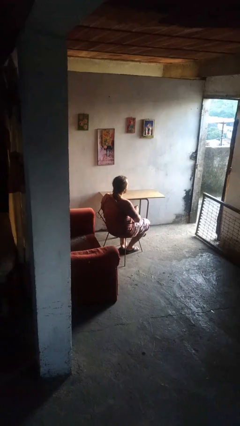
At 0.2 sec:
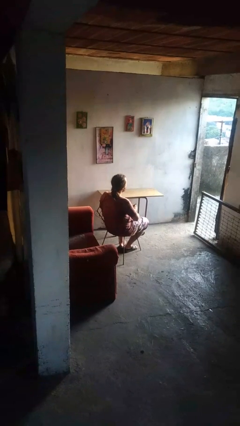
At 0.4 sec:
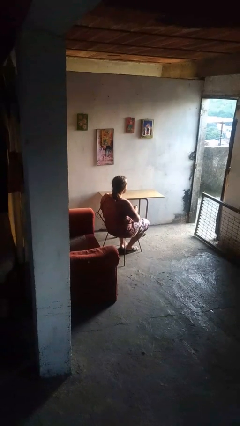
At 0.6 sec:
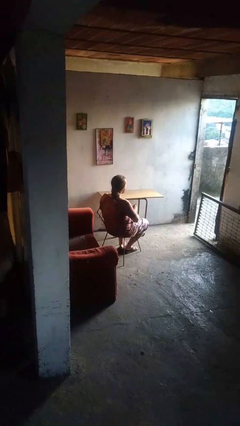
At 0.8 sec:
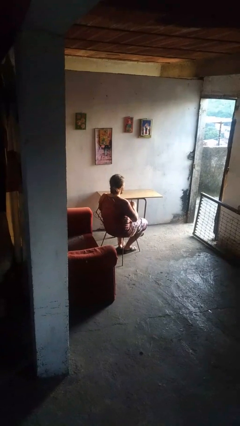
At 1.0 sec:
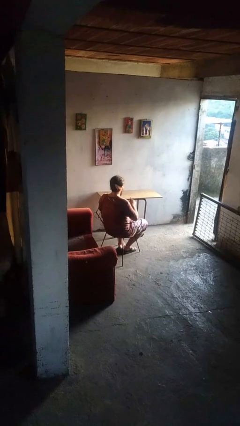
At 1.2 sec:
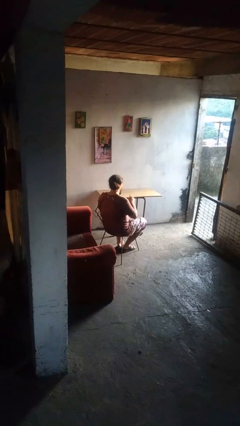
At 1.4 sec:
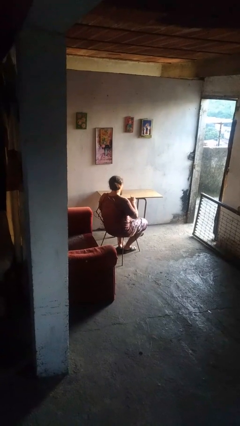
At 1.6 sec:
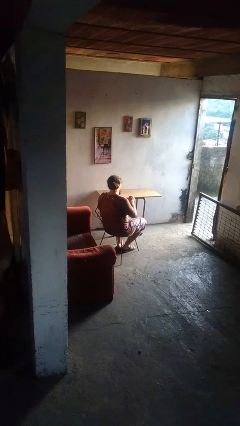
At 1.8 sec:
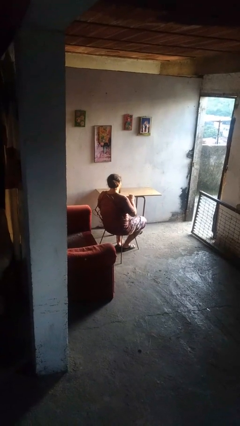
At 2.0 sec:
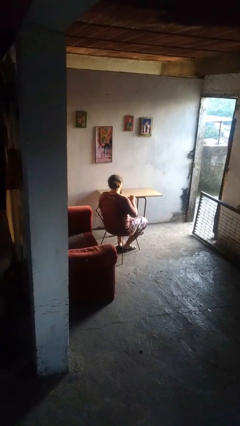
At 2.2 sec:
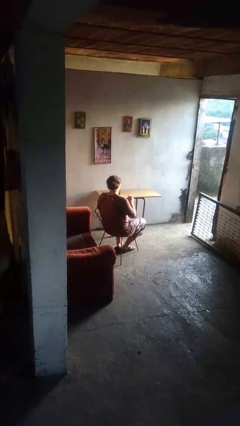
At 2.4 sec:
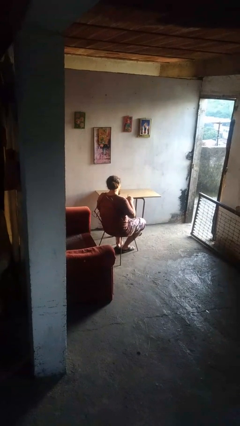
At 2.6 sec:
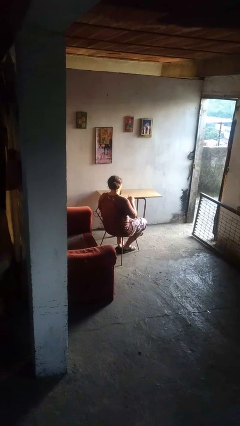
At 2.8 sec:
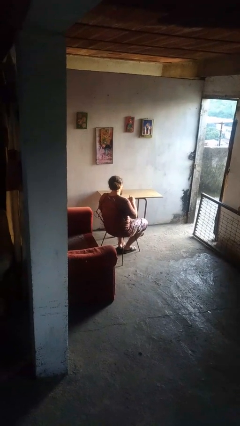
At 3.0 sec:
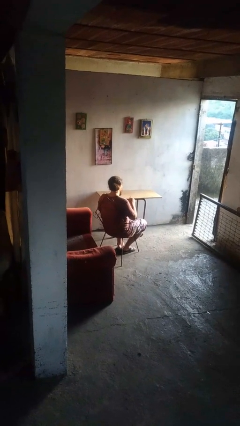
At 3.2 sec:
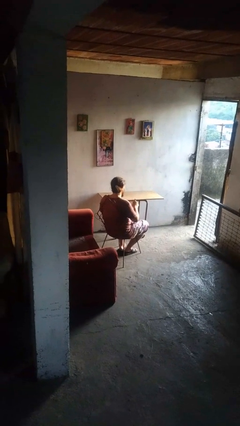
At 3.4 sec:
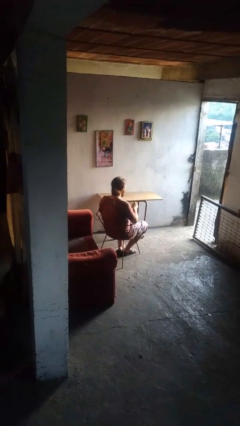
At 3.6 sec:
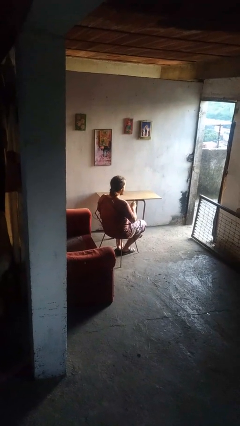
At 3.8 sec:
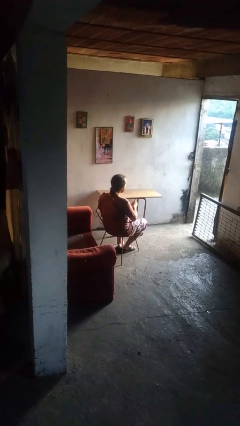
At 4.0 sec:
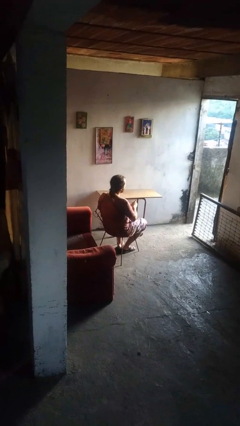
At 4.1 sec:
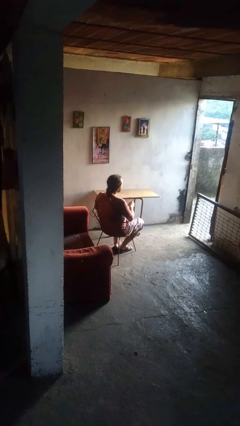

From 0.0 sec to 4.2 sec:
person stirs mug

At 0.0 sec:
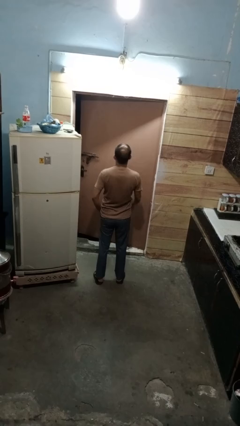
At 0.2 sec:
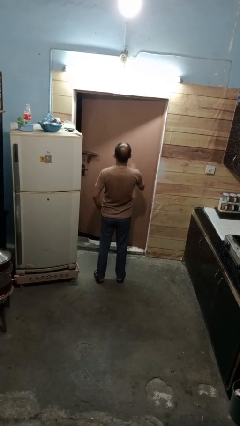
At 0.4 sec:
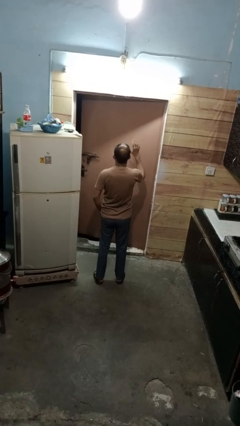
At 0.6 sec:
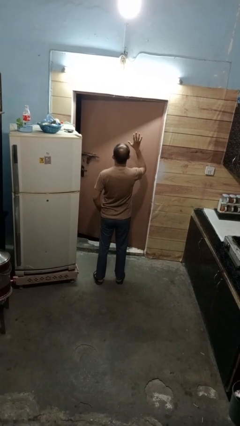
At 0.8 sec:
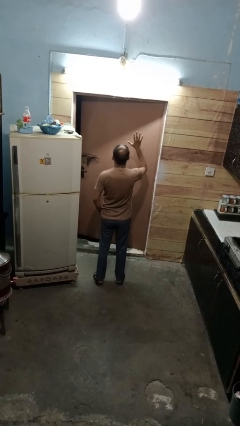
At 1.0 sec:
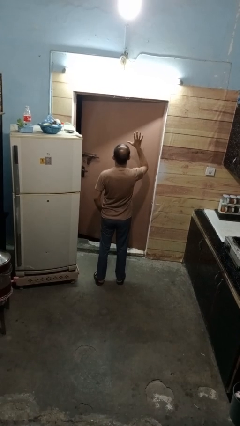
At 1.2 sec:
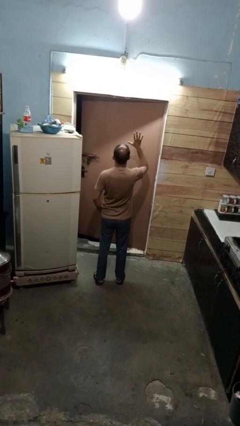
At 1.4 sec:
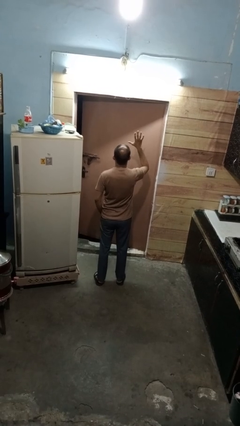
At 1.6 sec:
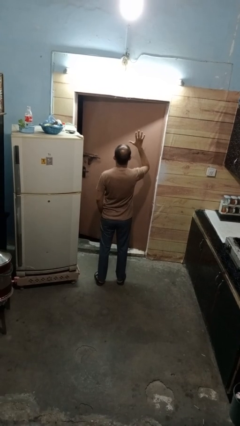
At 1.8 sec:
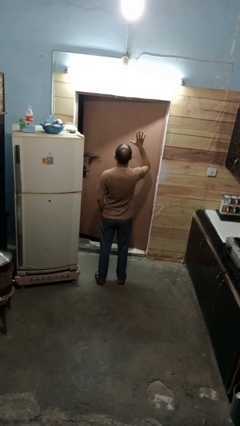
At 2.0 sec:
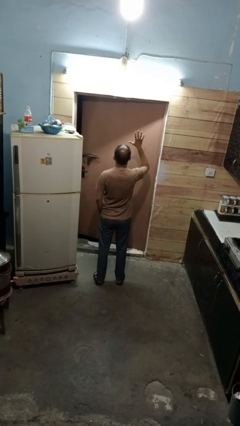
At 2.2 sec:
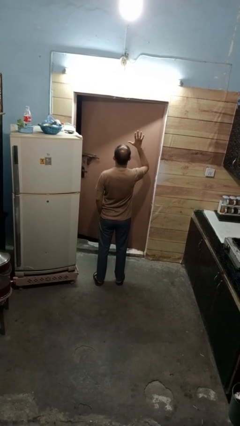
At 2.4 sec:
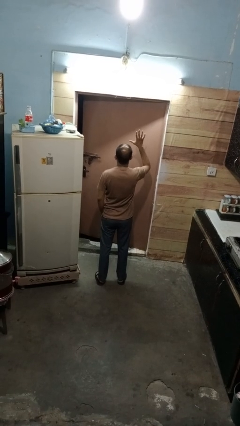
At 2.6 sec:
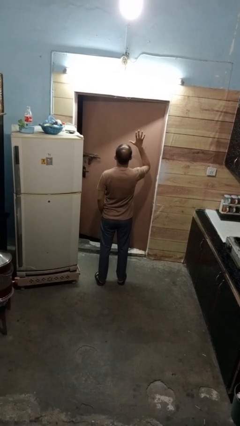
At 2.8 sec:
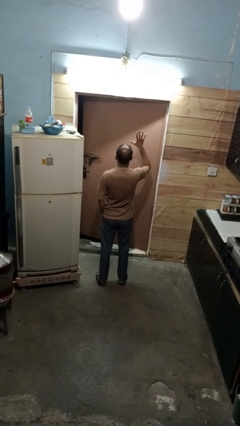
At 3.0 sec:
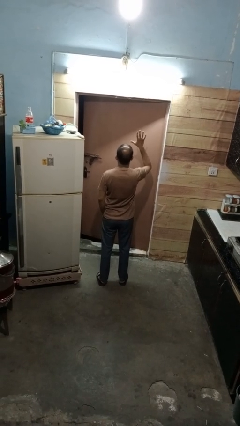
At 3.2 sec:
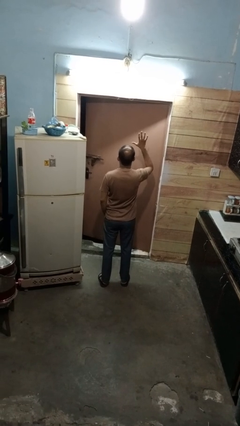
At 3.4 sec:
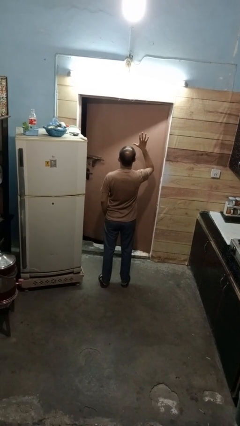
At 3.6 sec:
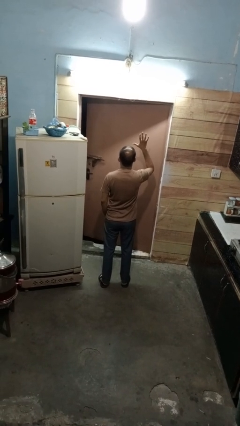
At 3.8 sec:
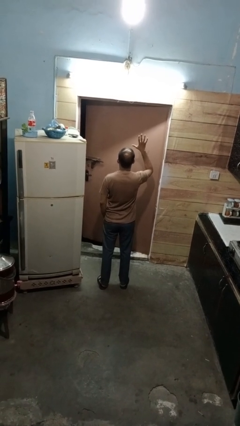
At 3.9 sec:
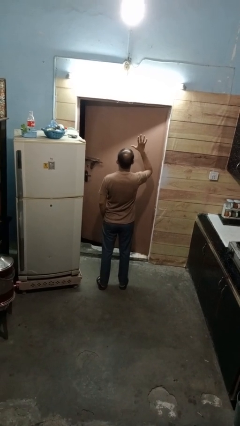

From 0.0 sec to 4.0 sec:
person gestures number five

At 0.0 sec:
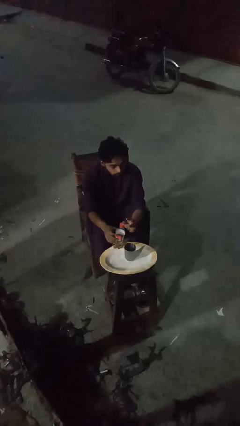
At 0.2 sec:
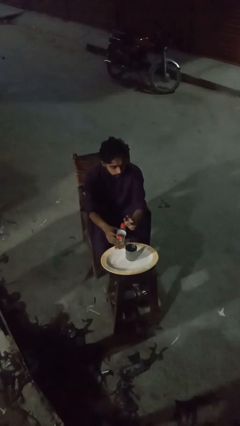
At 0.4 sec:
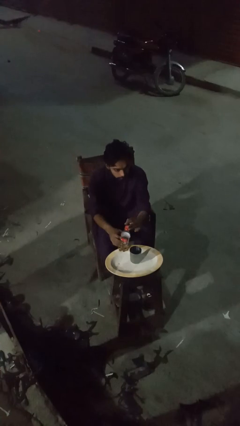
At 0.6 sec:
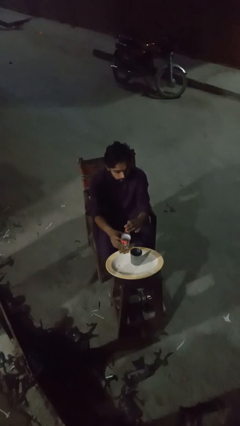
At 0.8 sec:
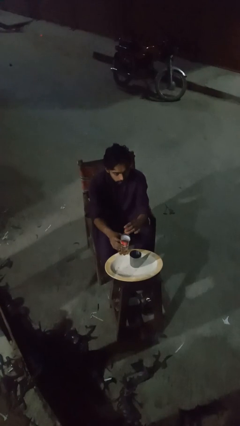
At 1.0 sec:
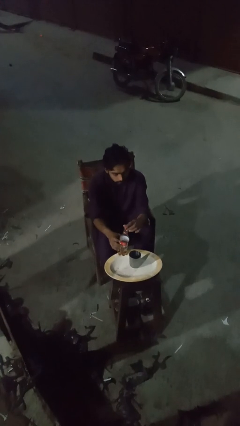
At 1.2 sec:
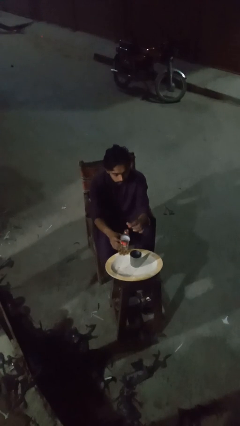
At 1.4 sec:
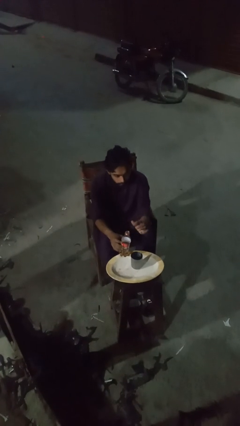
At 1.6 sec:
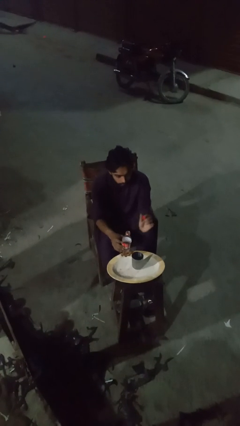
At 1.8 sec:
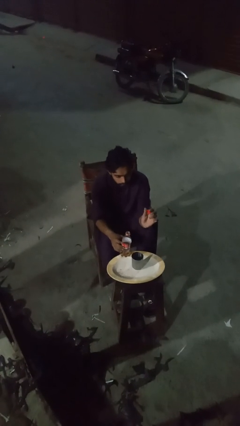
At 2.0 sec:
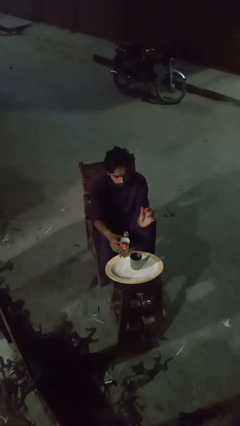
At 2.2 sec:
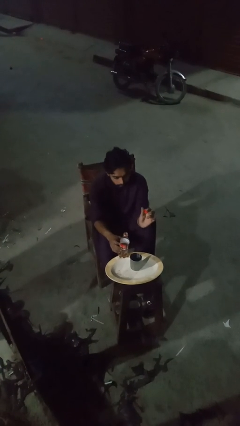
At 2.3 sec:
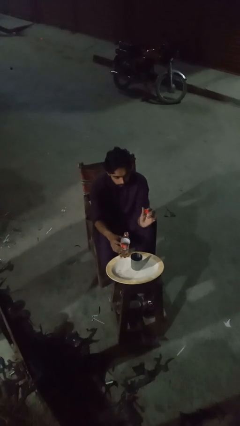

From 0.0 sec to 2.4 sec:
person unscrews lid from bottle

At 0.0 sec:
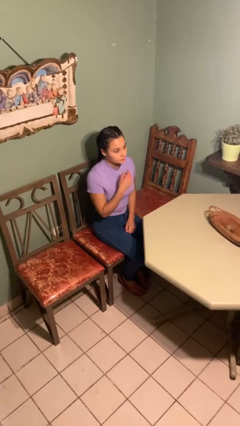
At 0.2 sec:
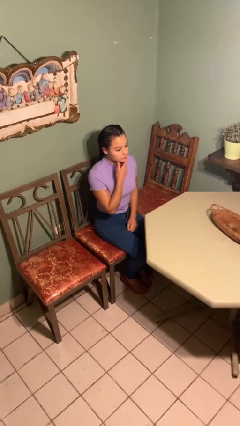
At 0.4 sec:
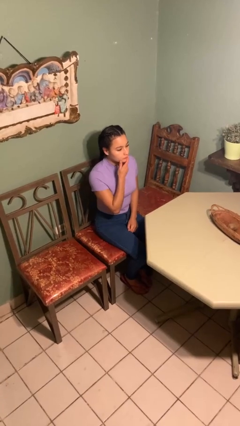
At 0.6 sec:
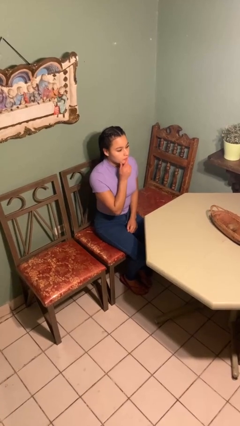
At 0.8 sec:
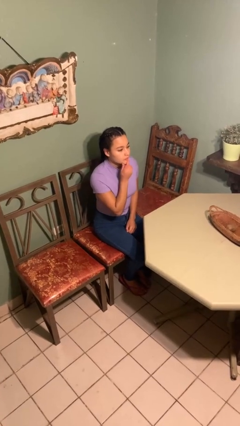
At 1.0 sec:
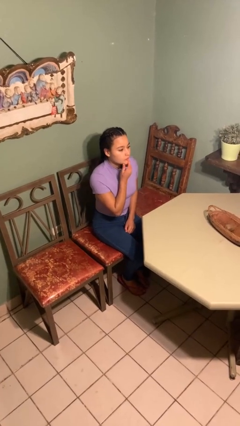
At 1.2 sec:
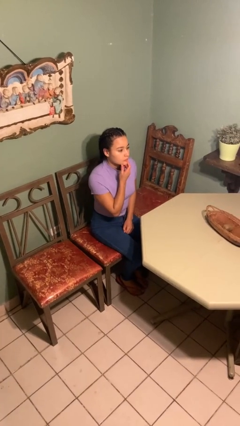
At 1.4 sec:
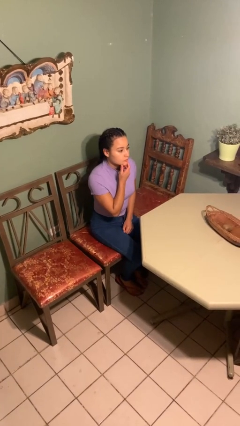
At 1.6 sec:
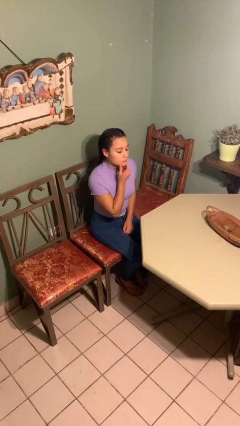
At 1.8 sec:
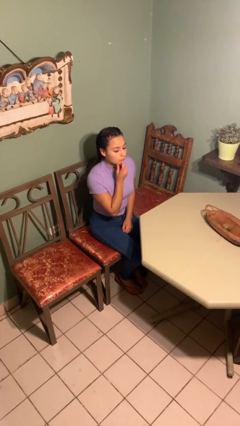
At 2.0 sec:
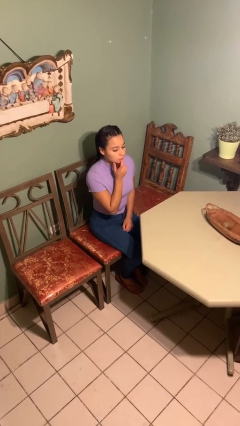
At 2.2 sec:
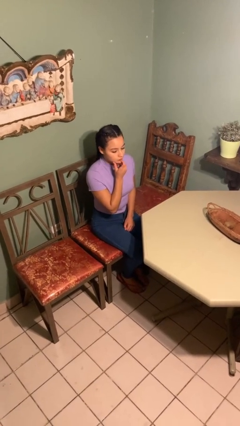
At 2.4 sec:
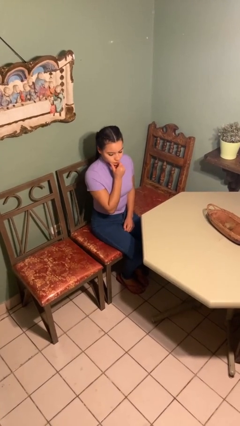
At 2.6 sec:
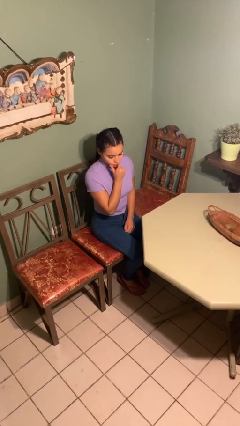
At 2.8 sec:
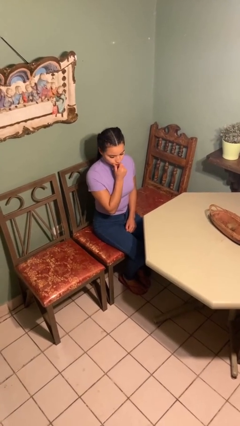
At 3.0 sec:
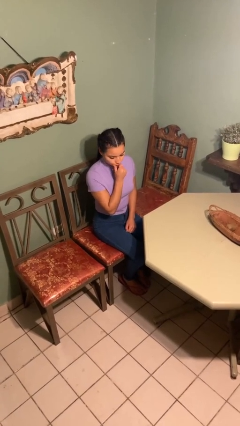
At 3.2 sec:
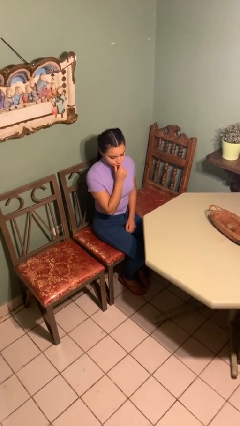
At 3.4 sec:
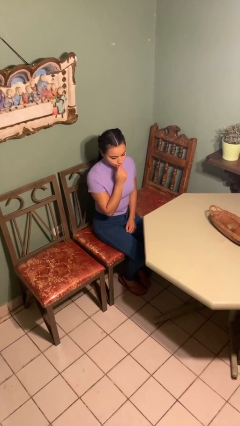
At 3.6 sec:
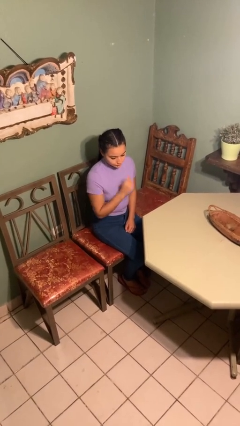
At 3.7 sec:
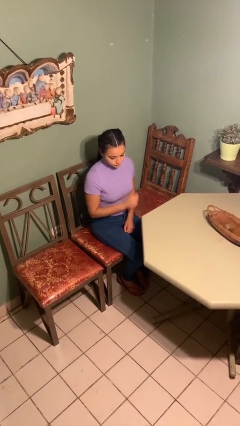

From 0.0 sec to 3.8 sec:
person strokes chin

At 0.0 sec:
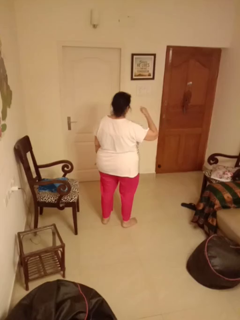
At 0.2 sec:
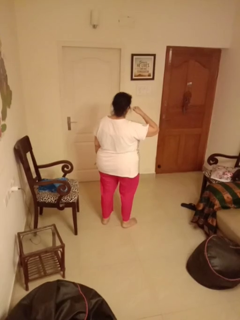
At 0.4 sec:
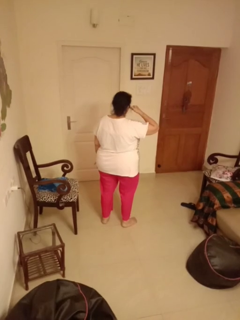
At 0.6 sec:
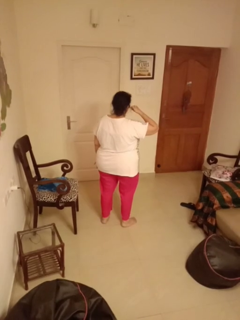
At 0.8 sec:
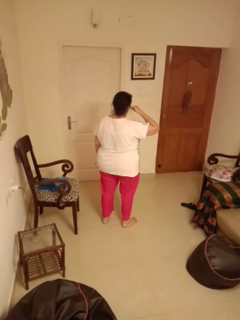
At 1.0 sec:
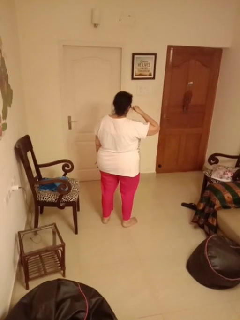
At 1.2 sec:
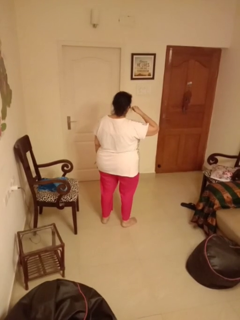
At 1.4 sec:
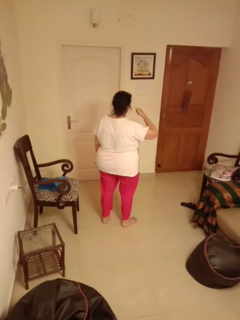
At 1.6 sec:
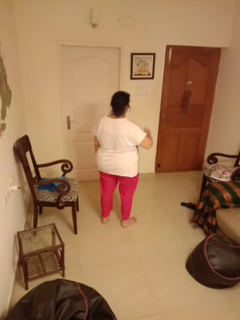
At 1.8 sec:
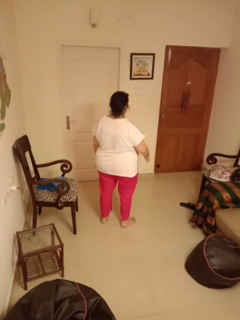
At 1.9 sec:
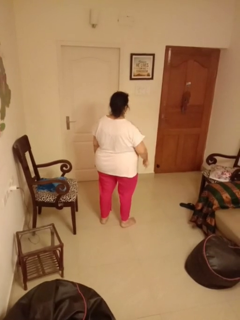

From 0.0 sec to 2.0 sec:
person gestures call me

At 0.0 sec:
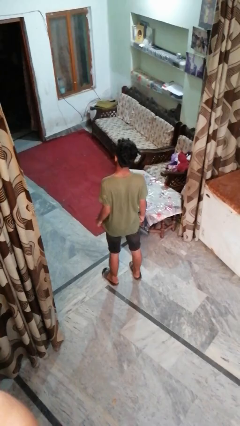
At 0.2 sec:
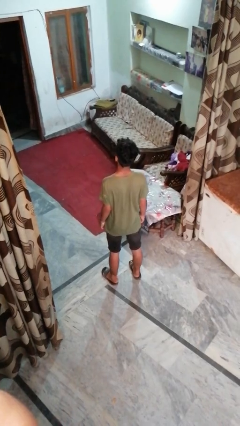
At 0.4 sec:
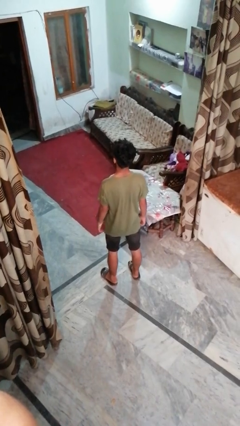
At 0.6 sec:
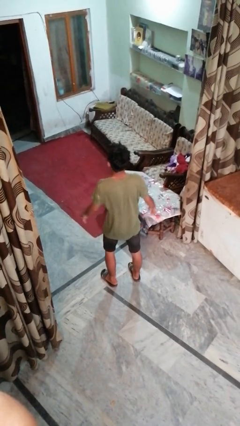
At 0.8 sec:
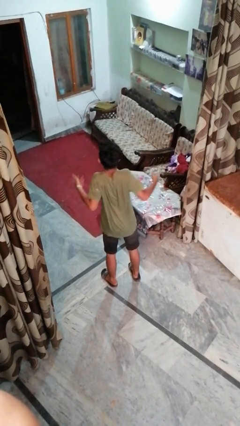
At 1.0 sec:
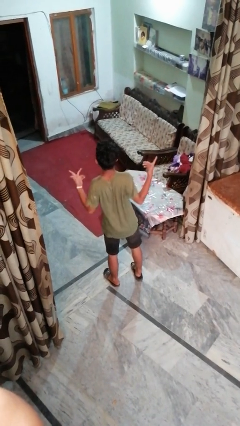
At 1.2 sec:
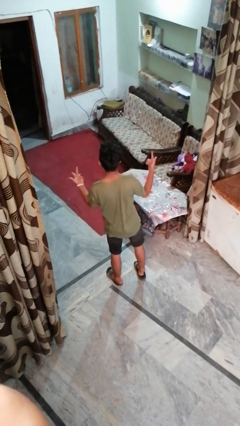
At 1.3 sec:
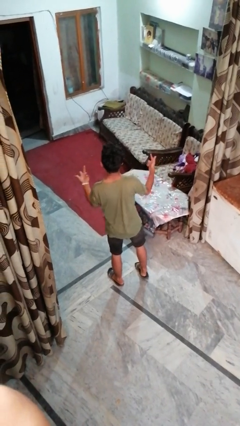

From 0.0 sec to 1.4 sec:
person shrugs

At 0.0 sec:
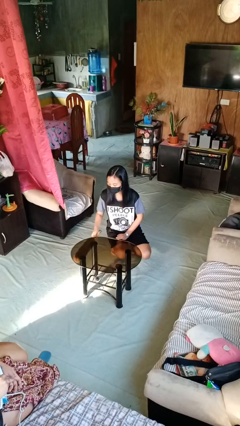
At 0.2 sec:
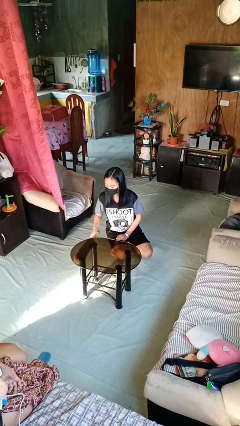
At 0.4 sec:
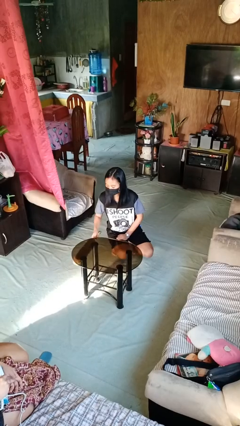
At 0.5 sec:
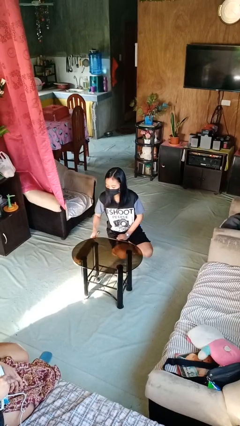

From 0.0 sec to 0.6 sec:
person dusts furniture
